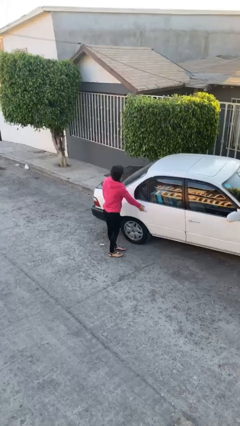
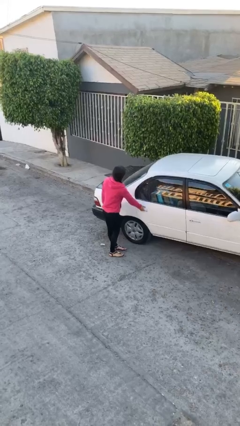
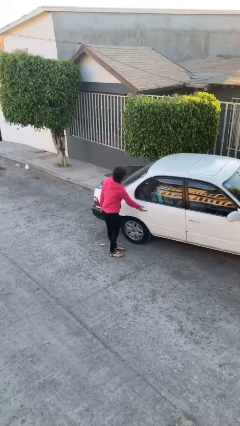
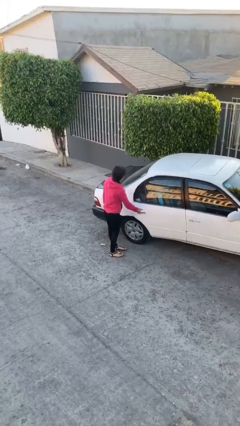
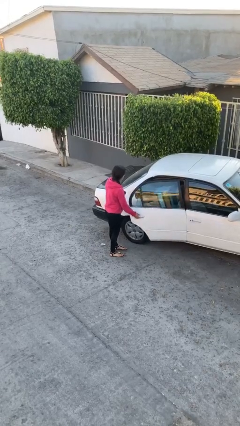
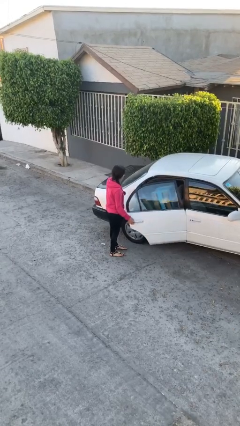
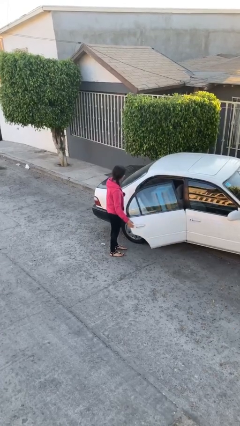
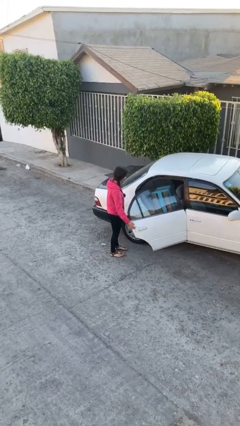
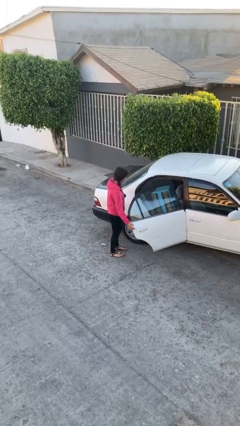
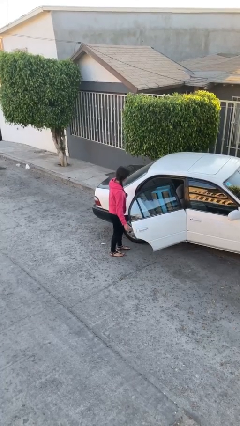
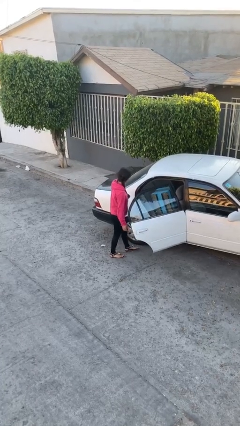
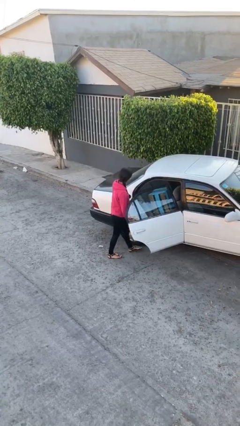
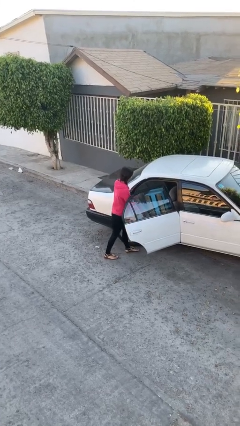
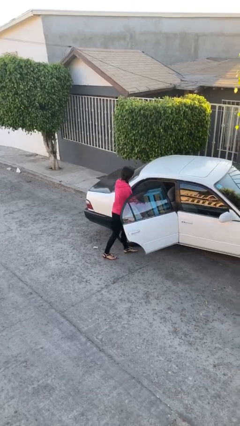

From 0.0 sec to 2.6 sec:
person opens car door

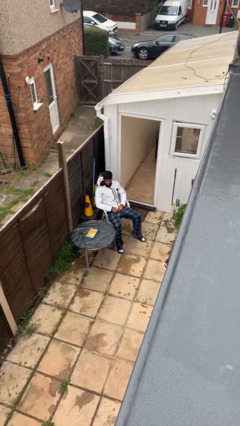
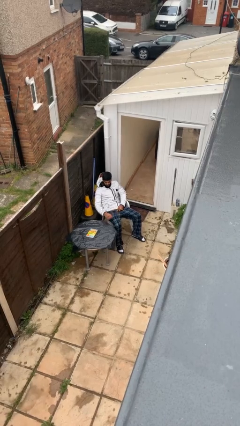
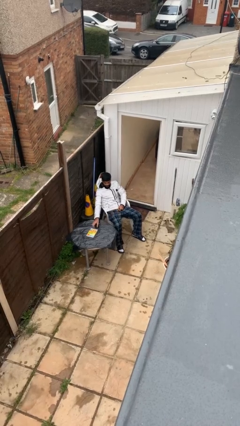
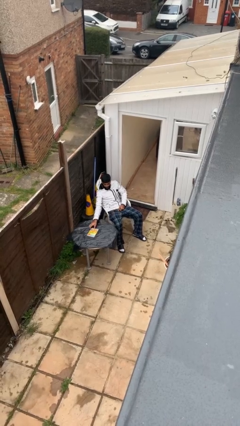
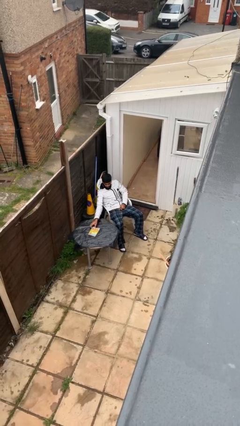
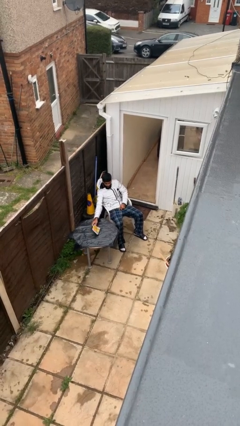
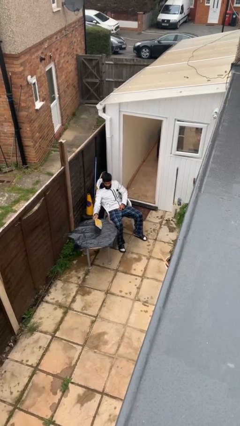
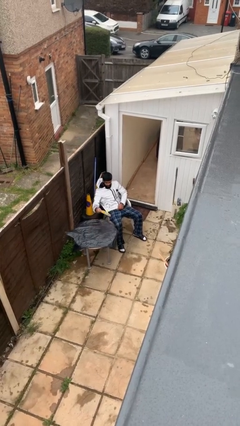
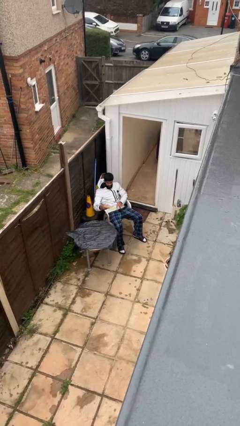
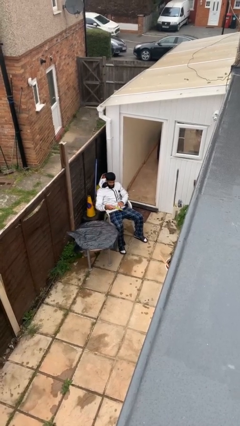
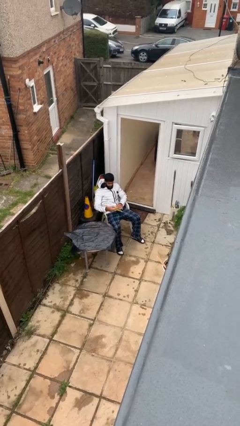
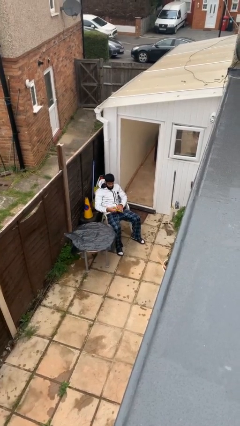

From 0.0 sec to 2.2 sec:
person picks up object from table

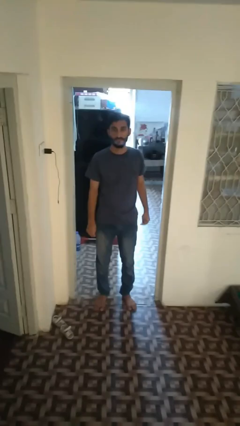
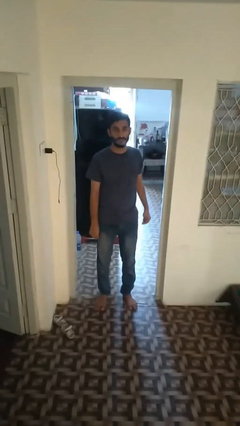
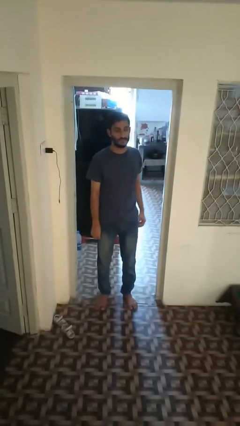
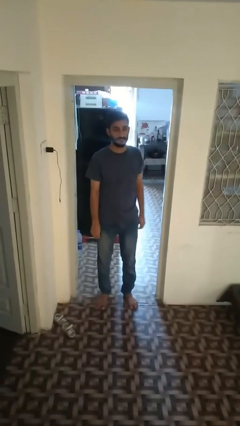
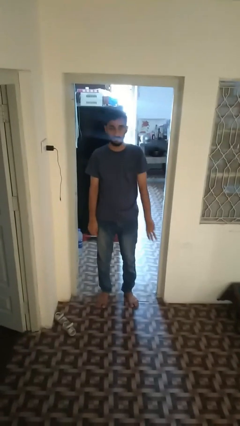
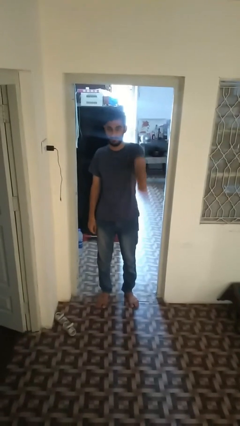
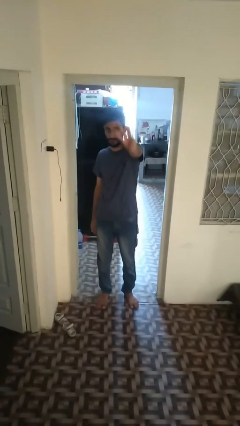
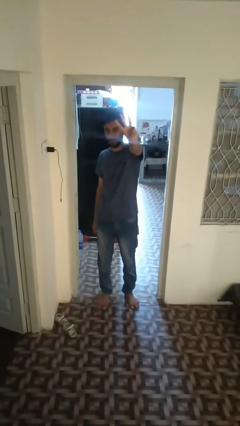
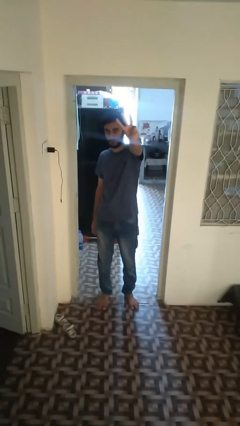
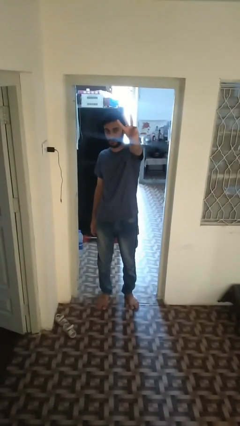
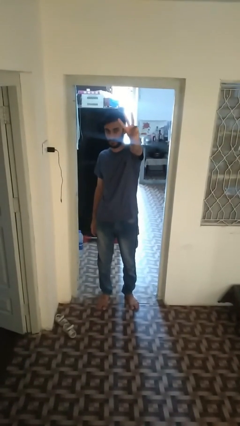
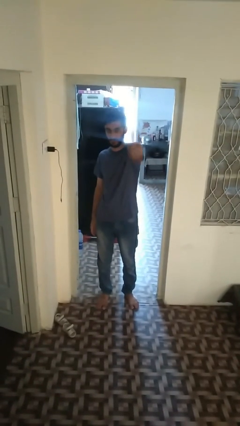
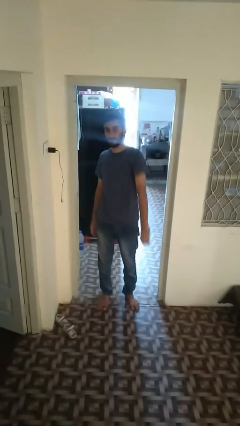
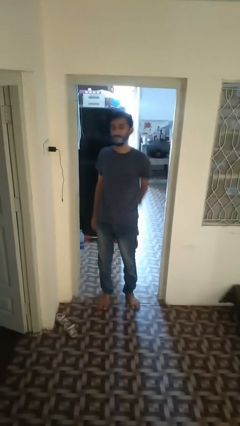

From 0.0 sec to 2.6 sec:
person gestures number three

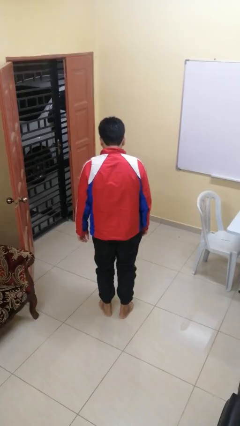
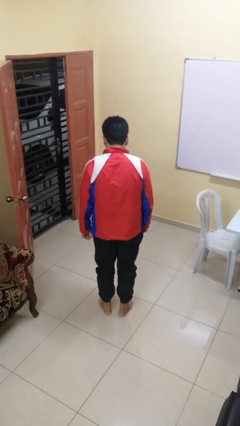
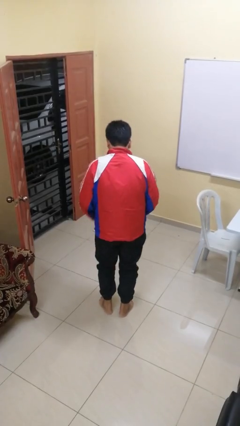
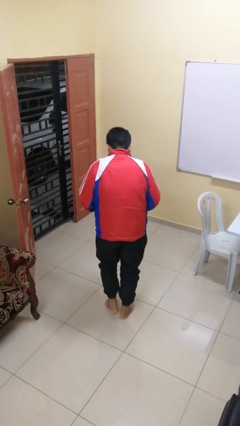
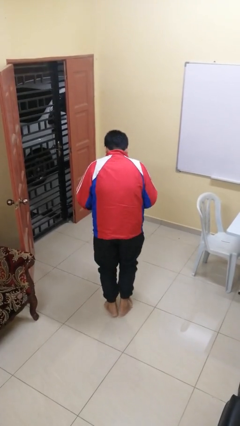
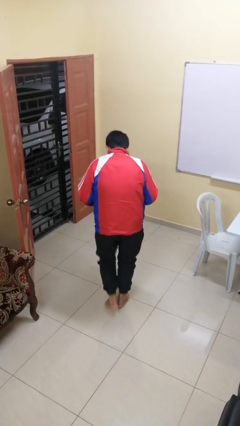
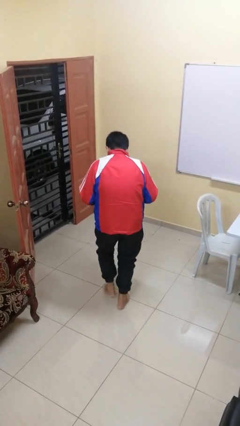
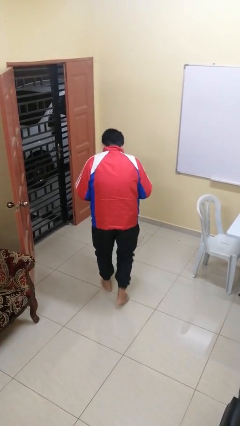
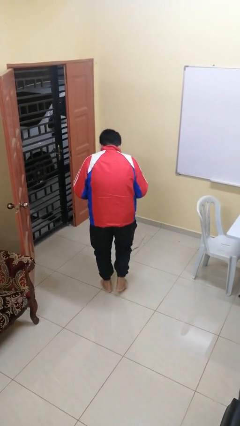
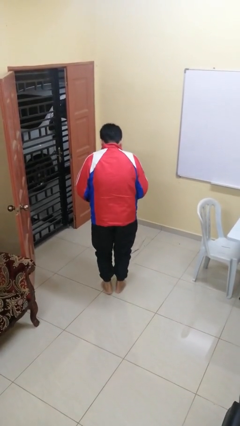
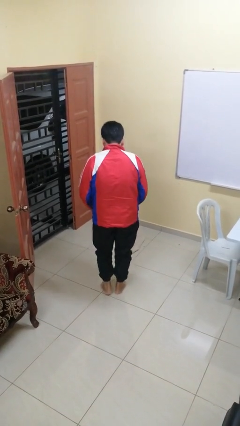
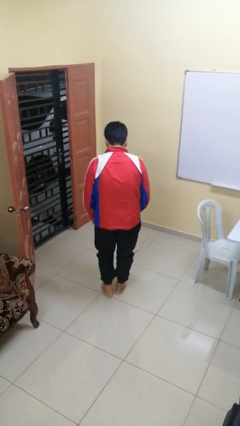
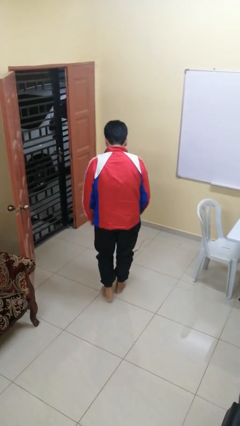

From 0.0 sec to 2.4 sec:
person walks tiptoe

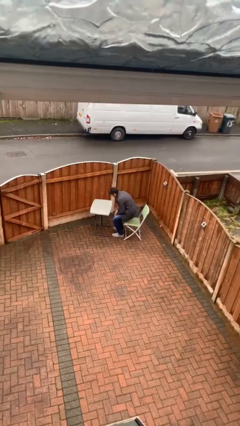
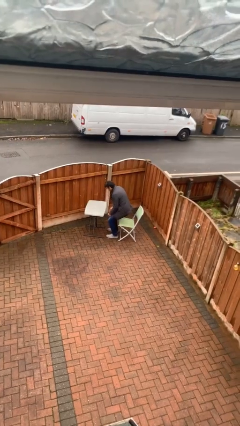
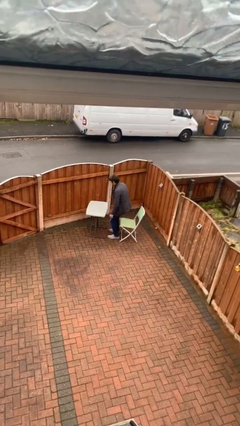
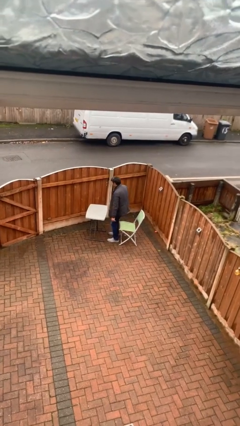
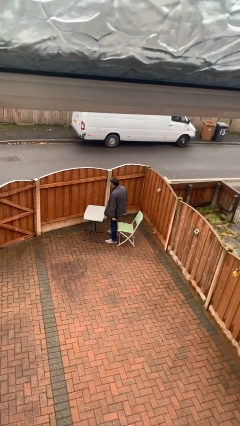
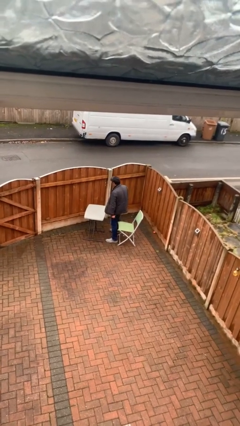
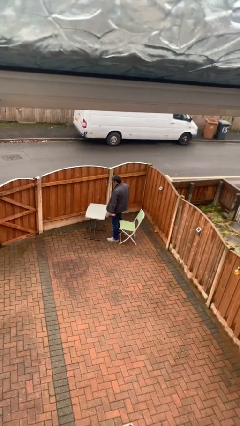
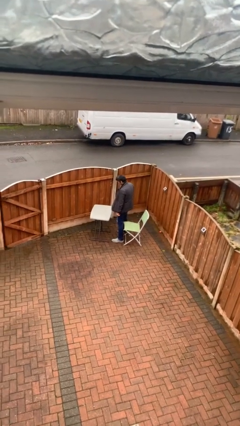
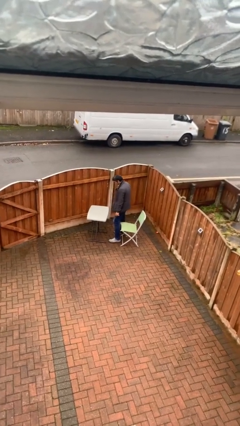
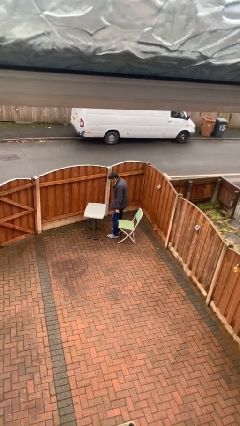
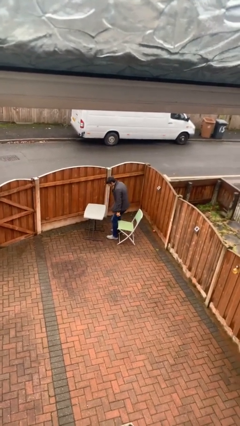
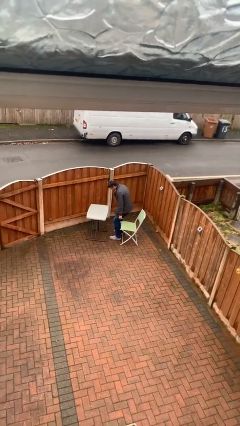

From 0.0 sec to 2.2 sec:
person stands up

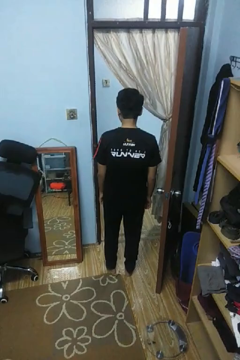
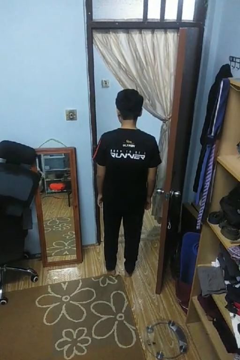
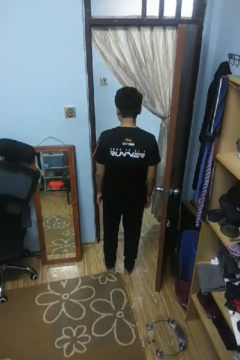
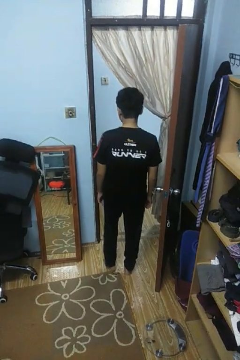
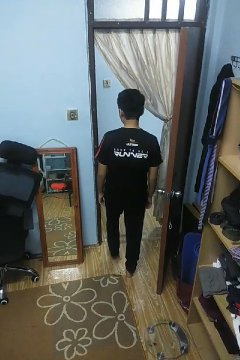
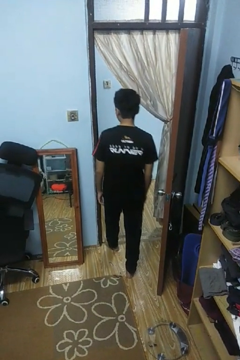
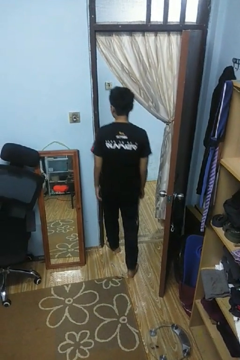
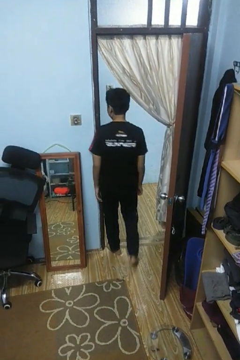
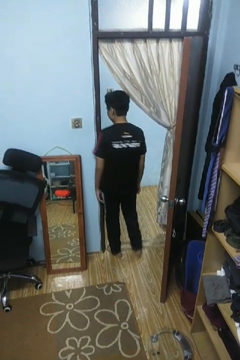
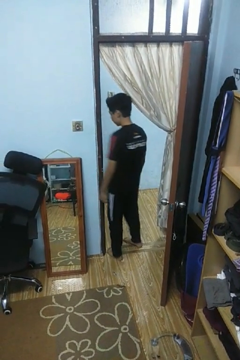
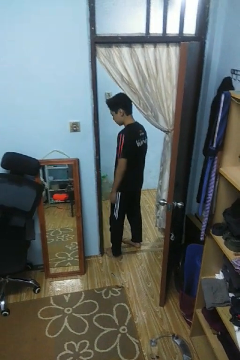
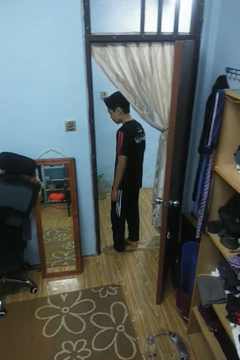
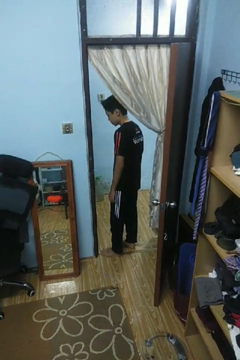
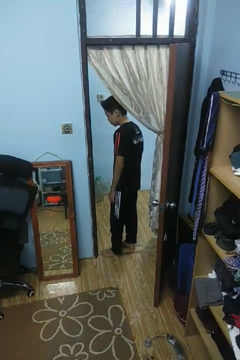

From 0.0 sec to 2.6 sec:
person bumps into wall

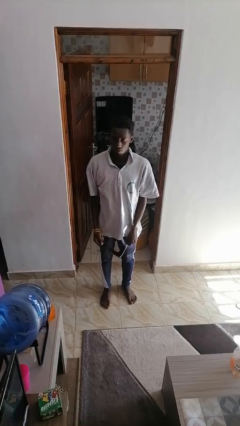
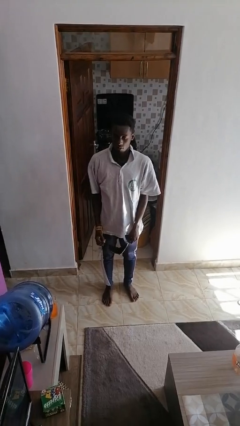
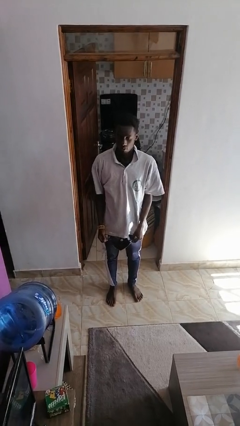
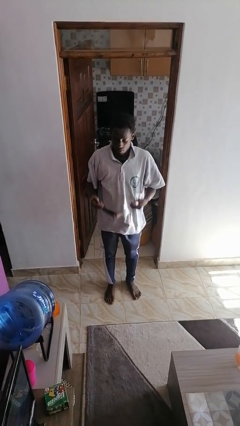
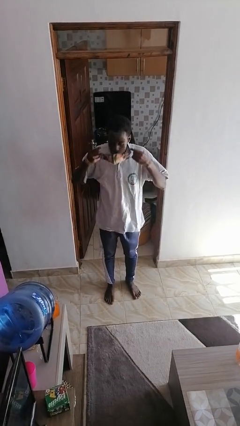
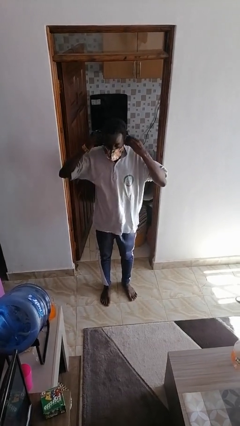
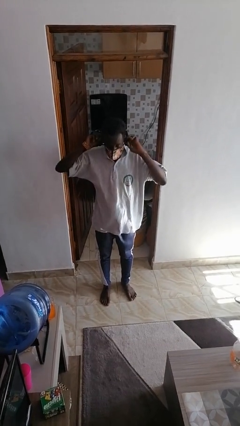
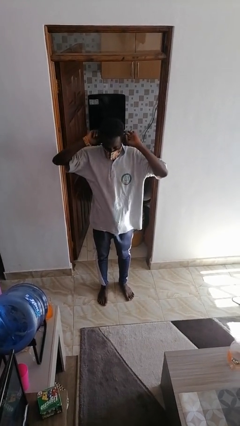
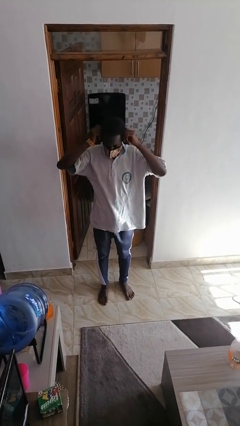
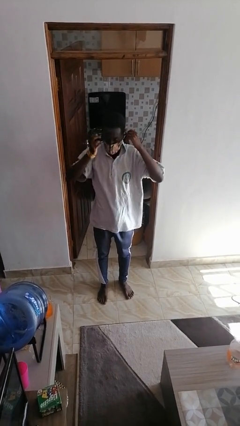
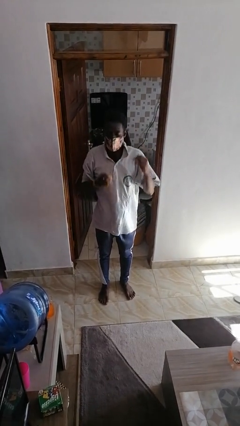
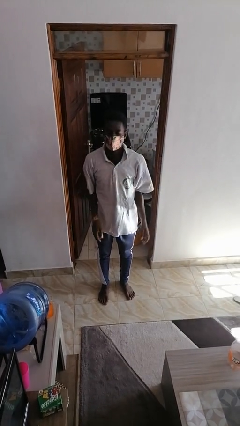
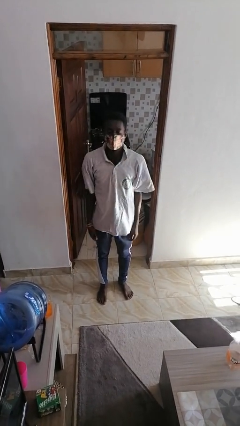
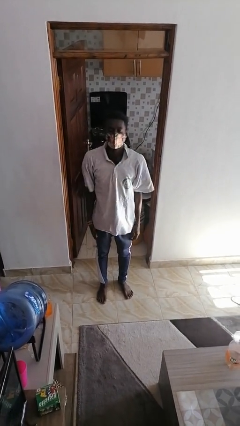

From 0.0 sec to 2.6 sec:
person puts on facemask
